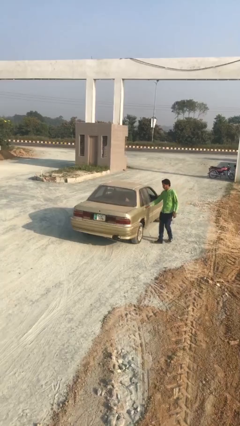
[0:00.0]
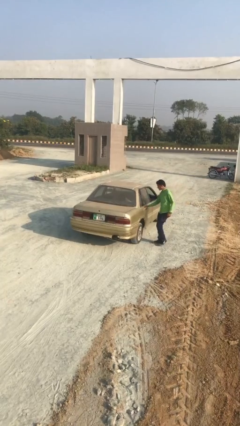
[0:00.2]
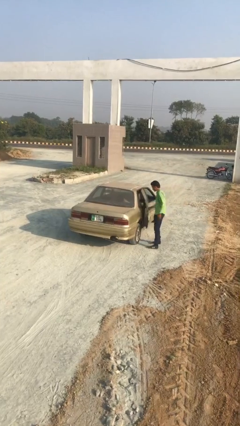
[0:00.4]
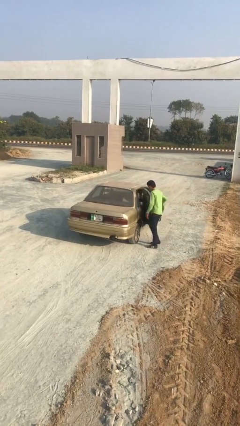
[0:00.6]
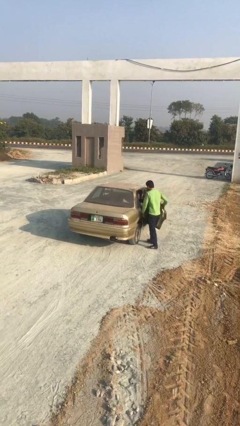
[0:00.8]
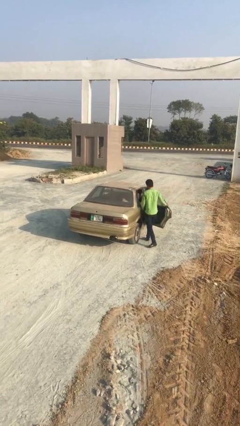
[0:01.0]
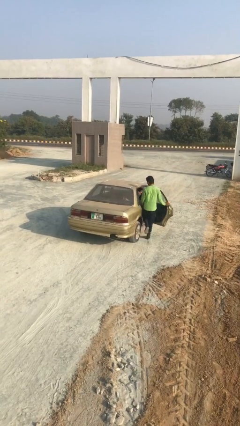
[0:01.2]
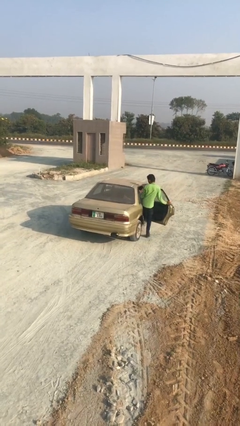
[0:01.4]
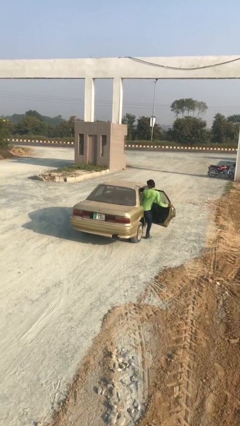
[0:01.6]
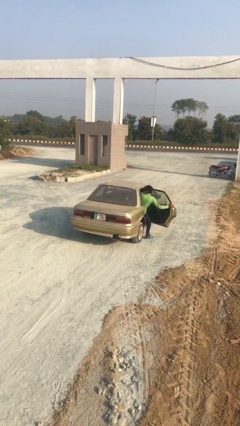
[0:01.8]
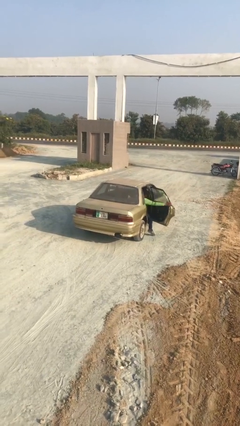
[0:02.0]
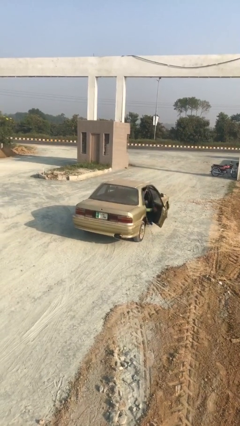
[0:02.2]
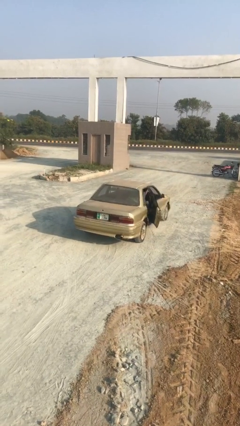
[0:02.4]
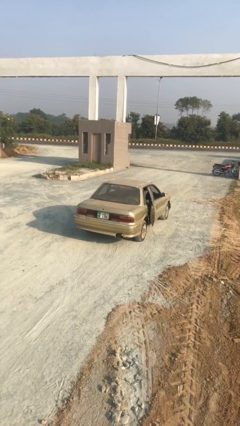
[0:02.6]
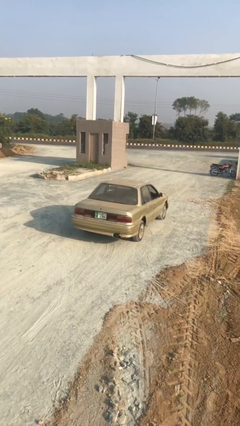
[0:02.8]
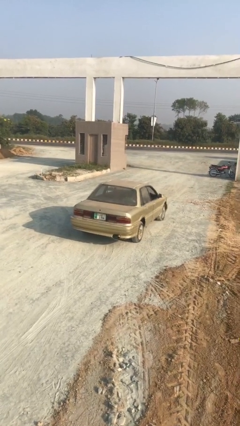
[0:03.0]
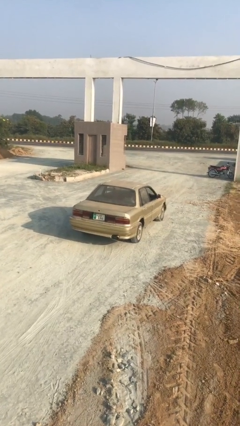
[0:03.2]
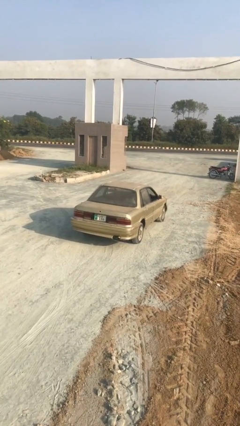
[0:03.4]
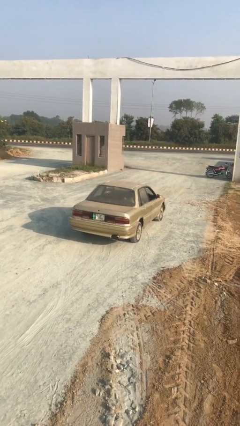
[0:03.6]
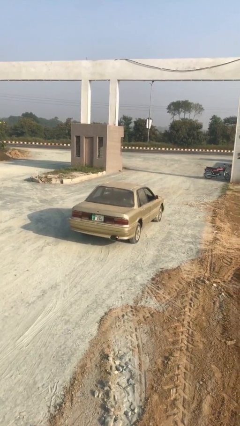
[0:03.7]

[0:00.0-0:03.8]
car picks up person

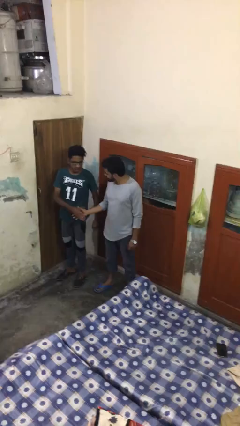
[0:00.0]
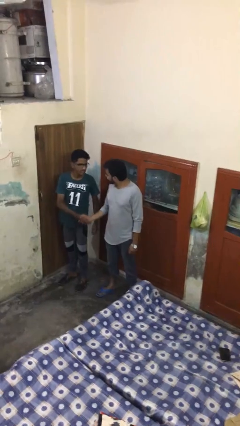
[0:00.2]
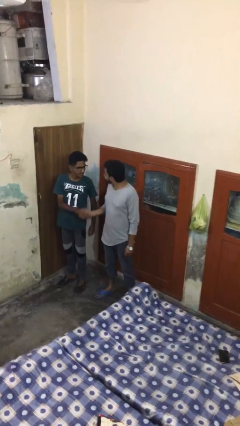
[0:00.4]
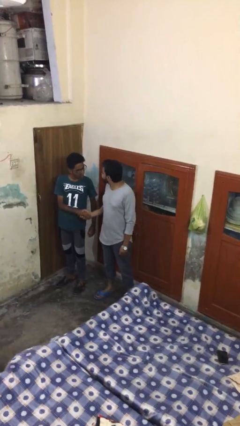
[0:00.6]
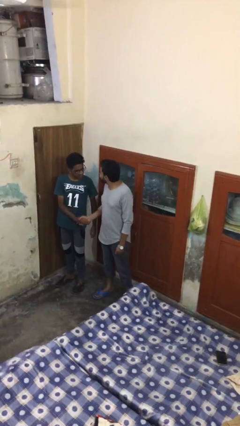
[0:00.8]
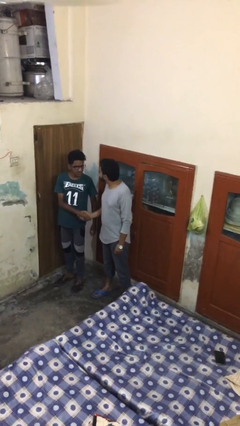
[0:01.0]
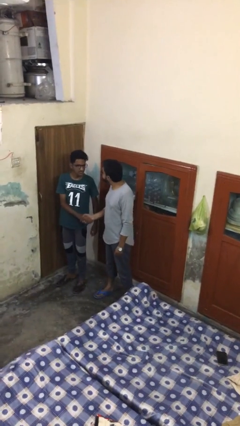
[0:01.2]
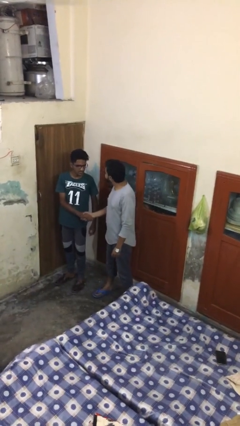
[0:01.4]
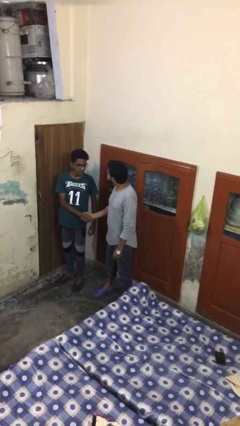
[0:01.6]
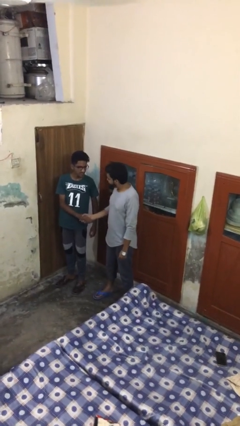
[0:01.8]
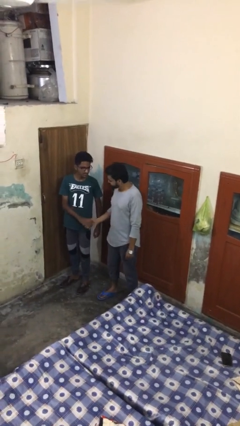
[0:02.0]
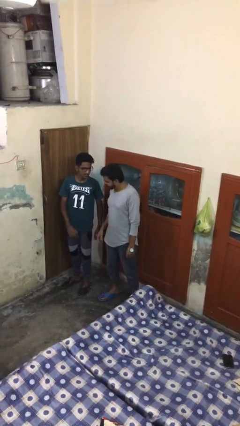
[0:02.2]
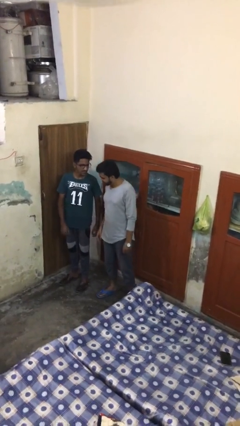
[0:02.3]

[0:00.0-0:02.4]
person shakes hand

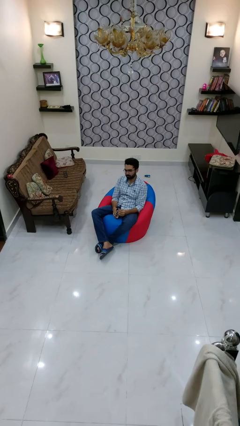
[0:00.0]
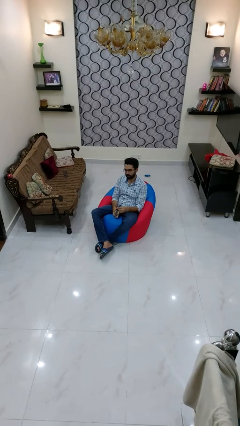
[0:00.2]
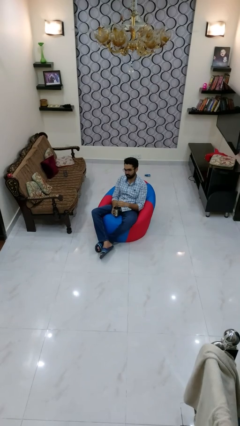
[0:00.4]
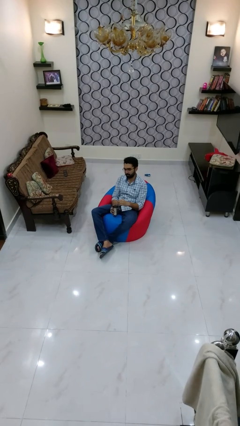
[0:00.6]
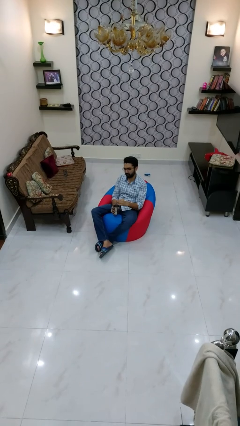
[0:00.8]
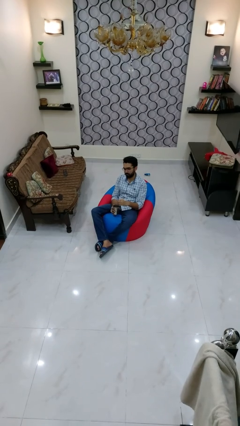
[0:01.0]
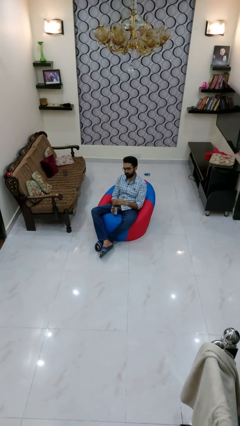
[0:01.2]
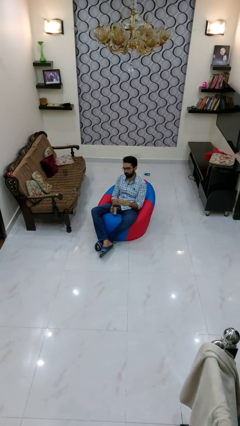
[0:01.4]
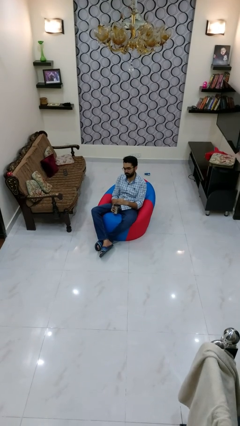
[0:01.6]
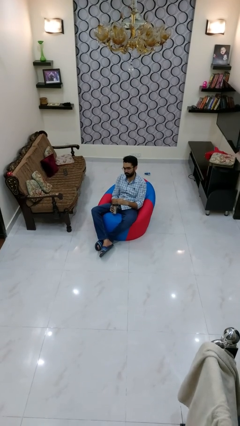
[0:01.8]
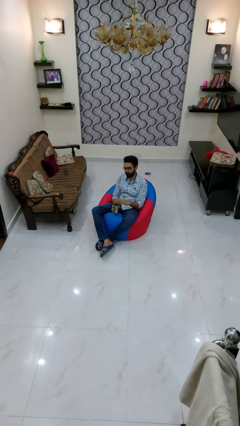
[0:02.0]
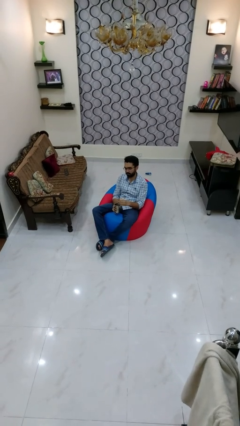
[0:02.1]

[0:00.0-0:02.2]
person stirs mug

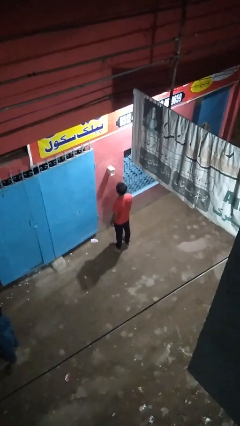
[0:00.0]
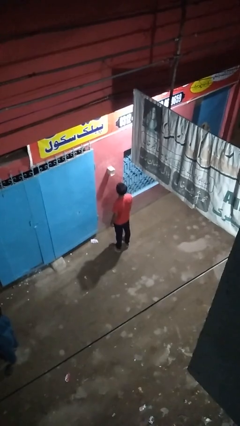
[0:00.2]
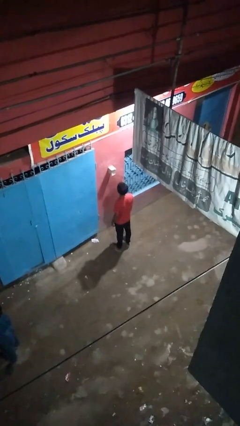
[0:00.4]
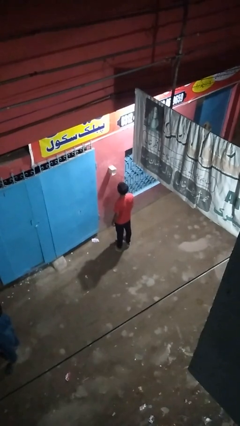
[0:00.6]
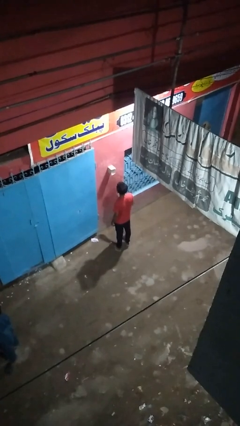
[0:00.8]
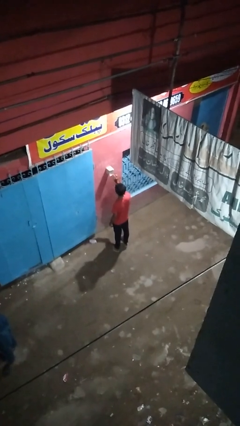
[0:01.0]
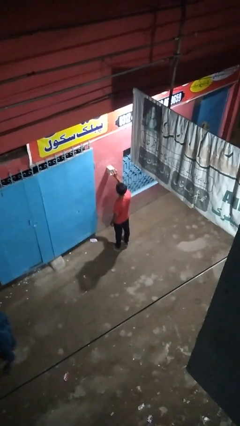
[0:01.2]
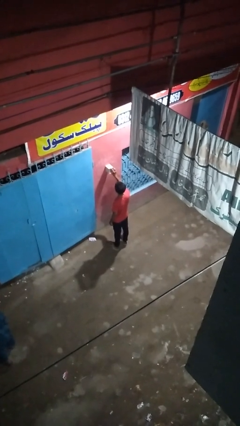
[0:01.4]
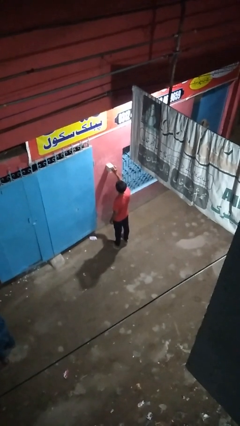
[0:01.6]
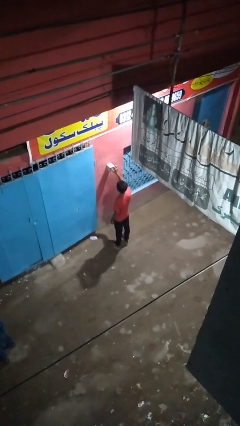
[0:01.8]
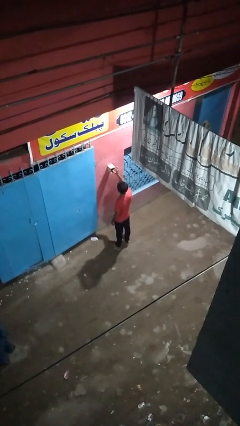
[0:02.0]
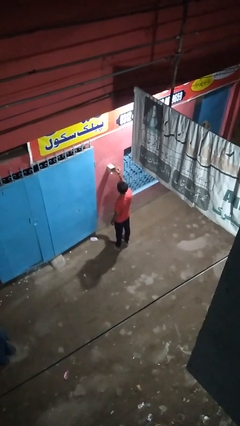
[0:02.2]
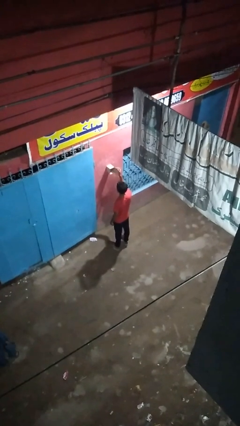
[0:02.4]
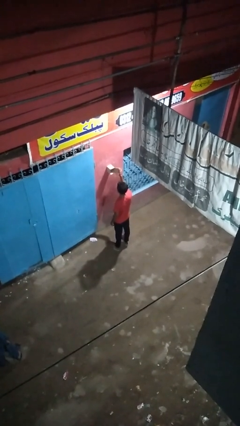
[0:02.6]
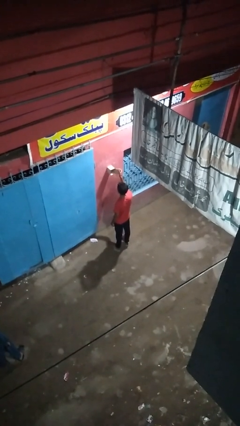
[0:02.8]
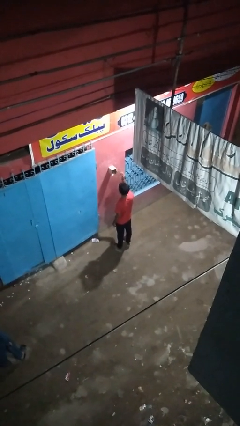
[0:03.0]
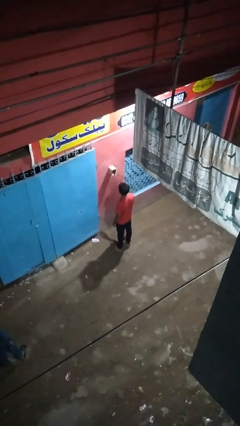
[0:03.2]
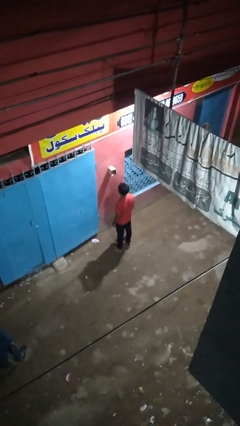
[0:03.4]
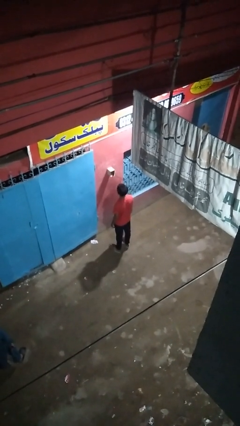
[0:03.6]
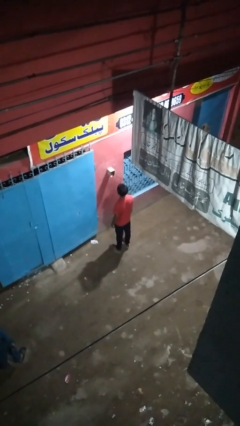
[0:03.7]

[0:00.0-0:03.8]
person opens mailbox

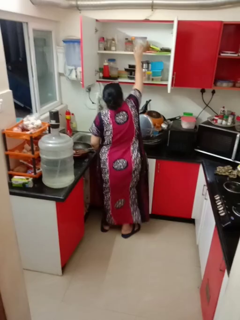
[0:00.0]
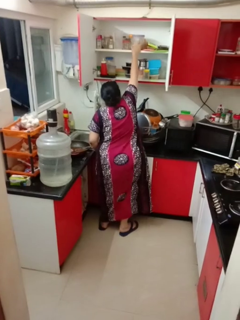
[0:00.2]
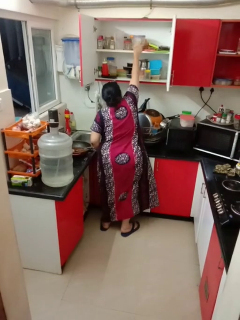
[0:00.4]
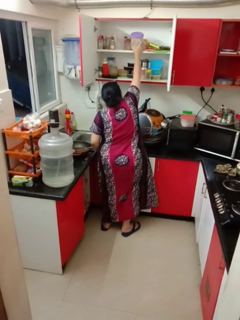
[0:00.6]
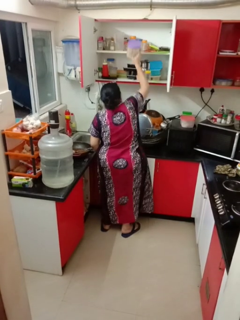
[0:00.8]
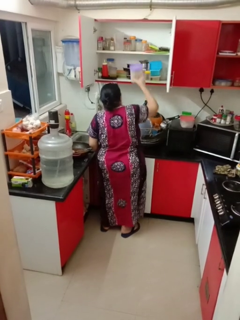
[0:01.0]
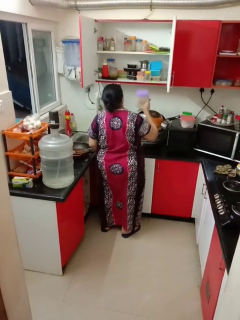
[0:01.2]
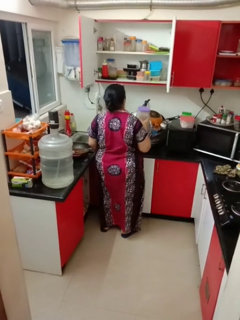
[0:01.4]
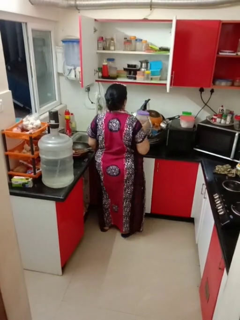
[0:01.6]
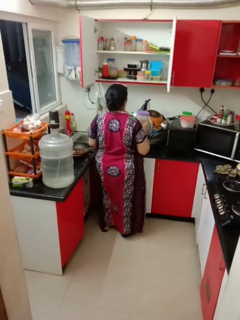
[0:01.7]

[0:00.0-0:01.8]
person takes object from cabinet

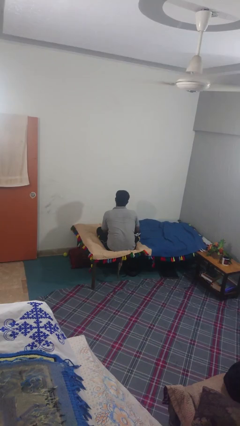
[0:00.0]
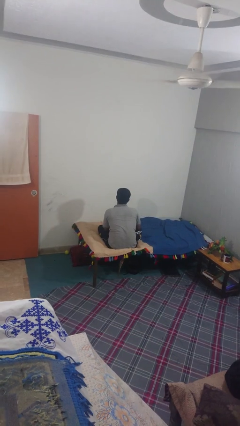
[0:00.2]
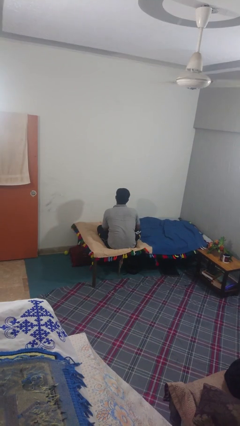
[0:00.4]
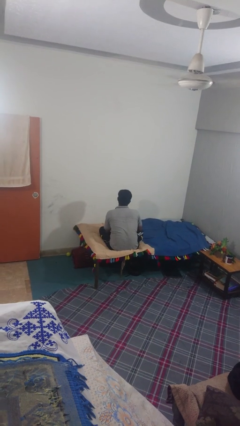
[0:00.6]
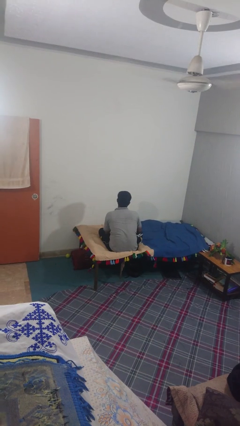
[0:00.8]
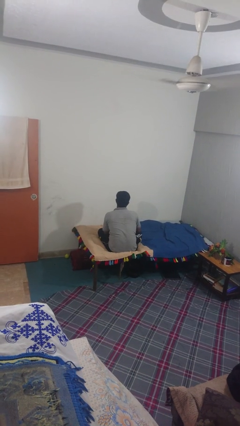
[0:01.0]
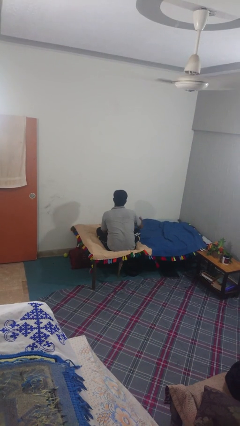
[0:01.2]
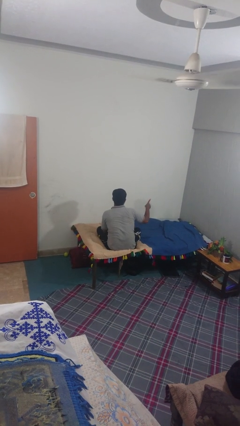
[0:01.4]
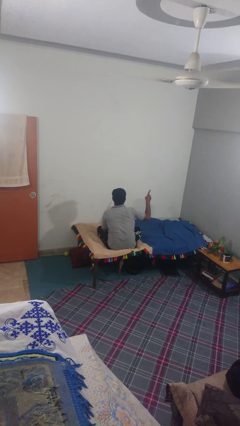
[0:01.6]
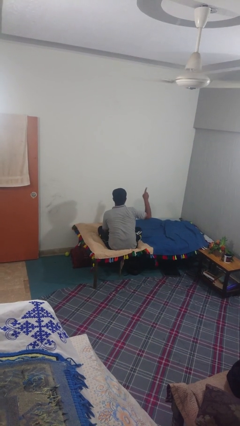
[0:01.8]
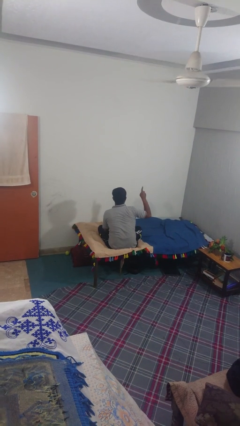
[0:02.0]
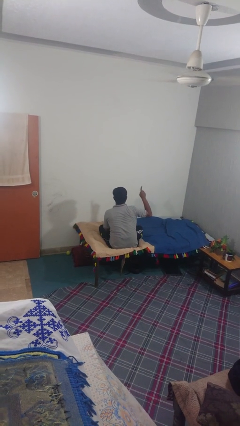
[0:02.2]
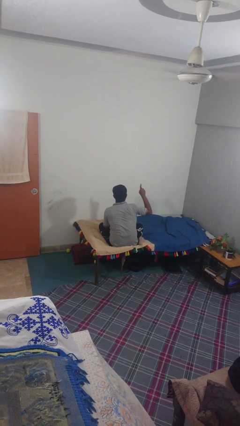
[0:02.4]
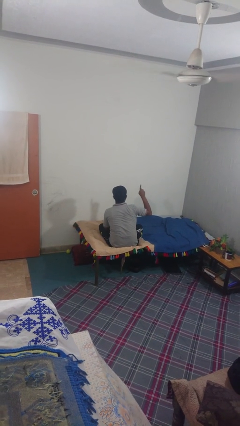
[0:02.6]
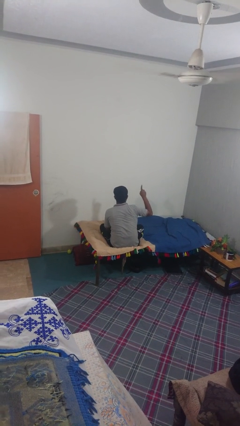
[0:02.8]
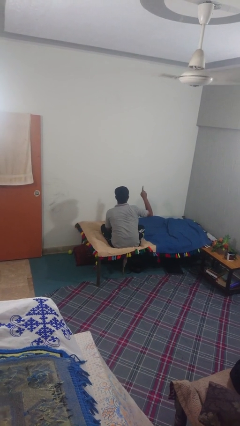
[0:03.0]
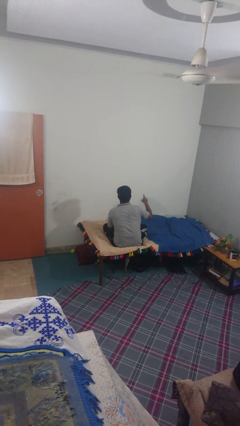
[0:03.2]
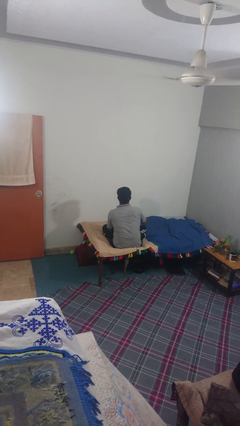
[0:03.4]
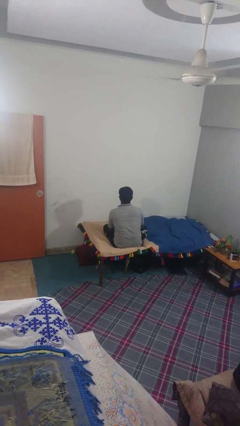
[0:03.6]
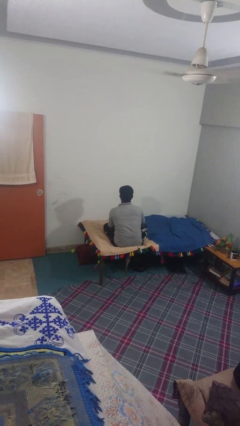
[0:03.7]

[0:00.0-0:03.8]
person gestures number one
